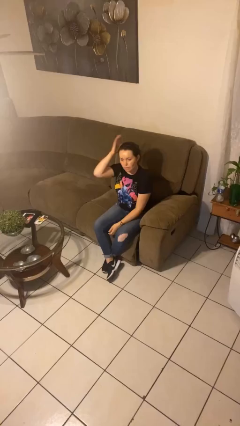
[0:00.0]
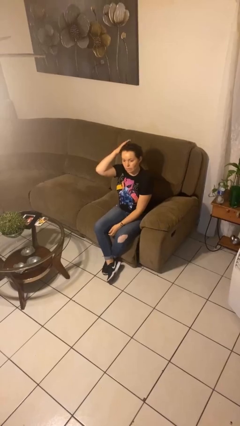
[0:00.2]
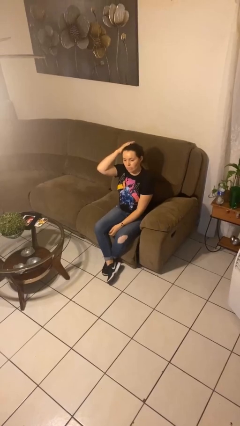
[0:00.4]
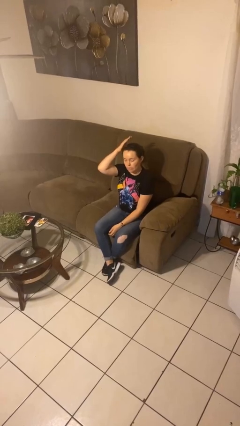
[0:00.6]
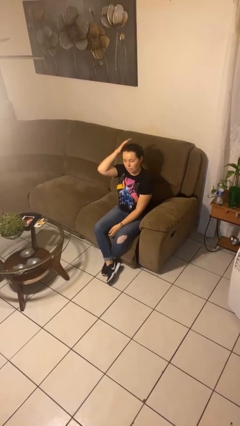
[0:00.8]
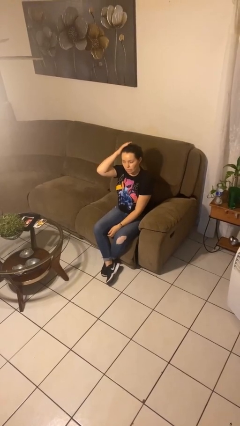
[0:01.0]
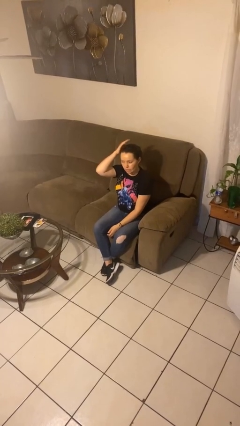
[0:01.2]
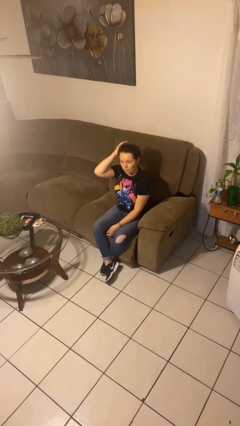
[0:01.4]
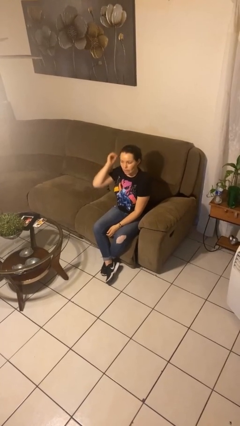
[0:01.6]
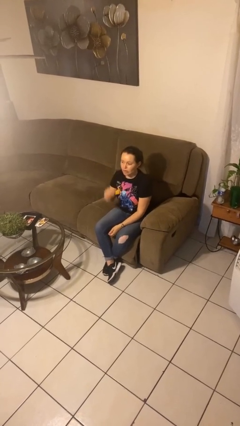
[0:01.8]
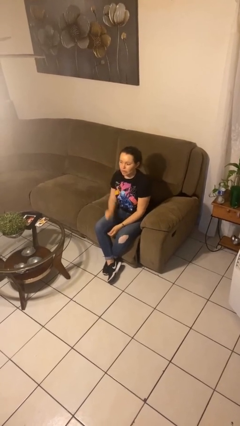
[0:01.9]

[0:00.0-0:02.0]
person pats head

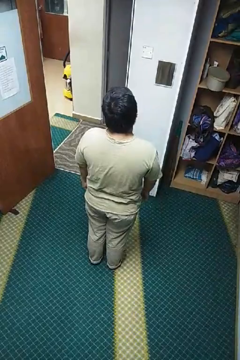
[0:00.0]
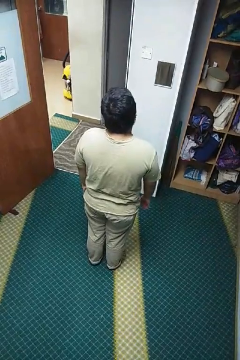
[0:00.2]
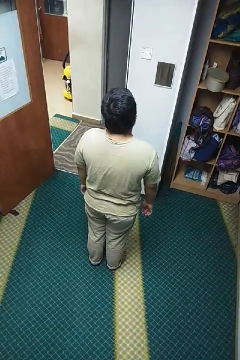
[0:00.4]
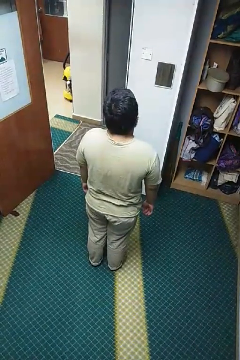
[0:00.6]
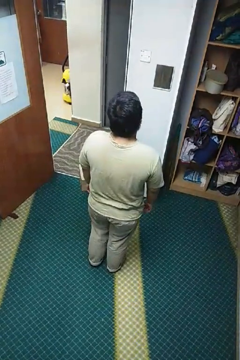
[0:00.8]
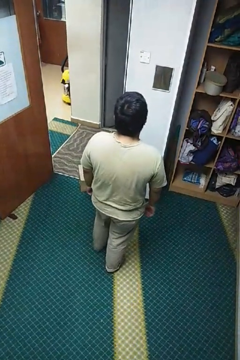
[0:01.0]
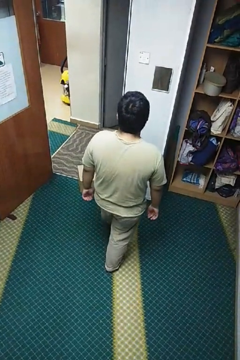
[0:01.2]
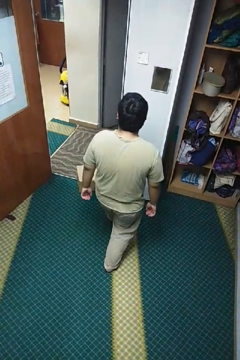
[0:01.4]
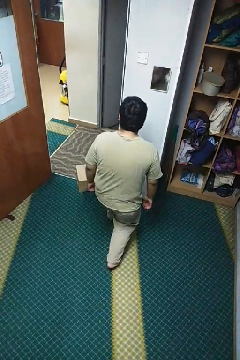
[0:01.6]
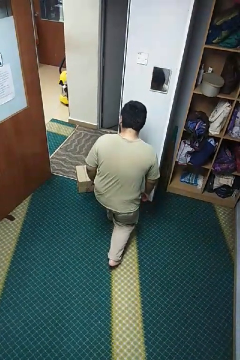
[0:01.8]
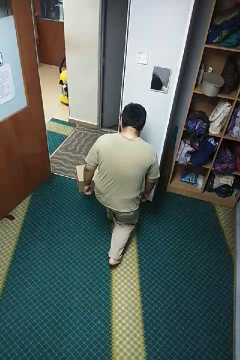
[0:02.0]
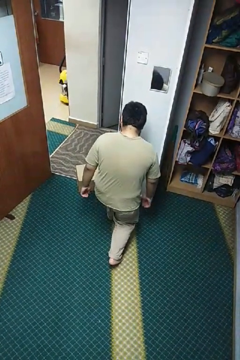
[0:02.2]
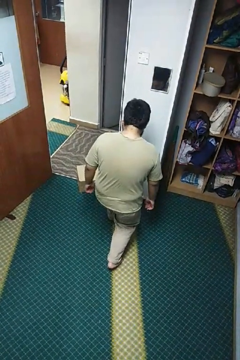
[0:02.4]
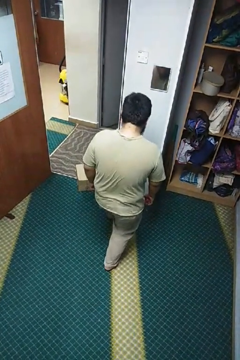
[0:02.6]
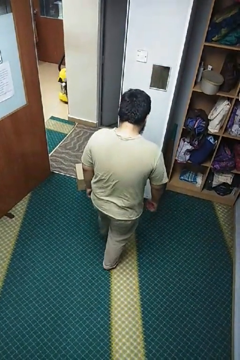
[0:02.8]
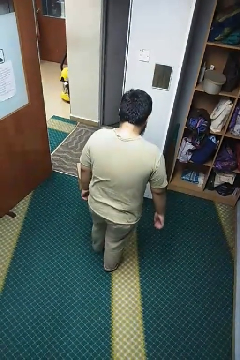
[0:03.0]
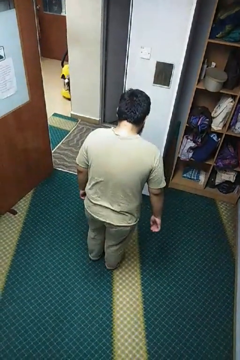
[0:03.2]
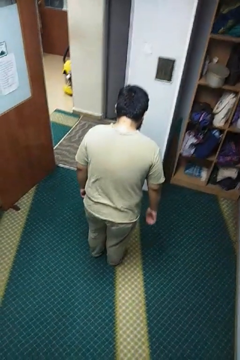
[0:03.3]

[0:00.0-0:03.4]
person exercises with lunges

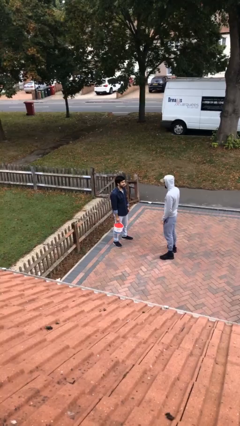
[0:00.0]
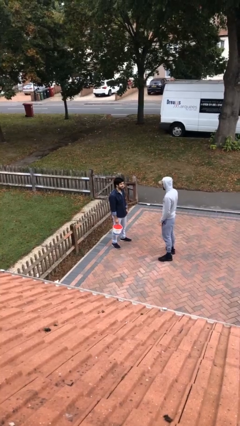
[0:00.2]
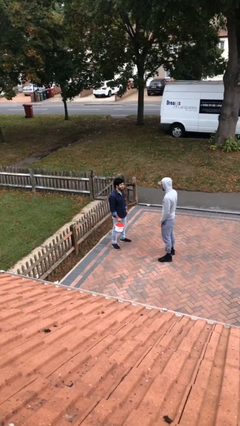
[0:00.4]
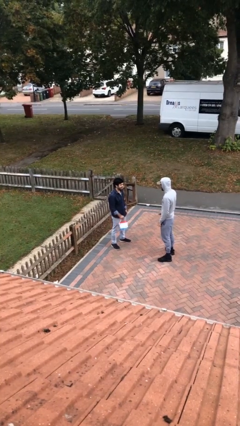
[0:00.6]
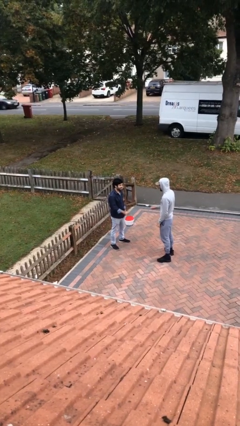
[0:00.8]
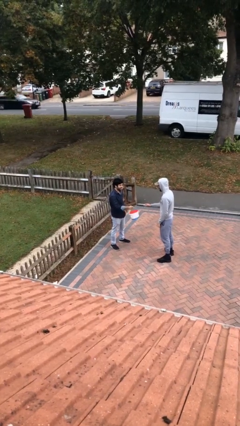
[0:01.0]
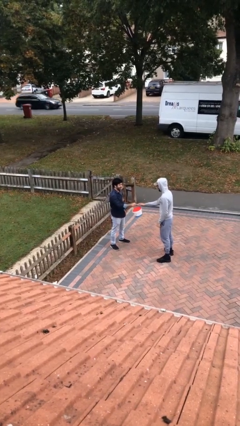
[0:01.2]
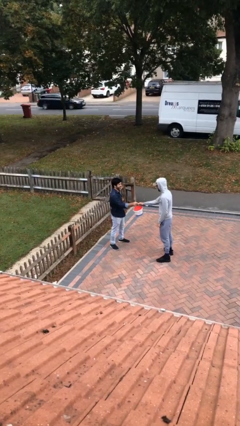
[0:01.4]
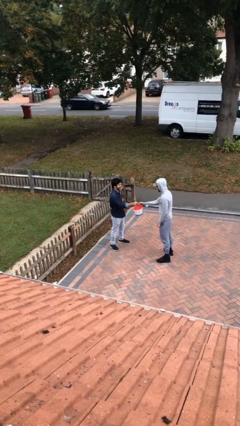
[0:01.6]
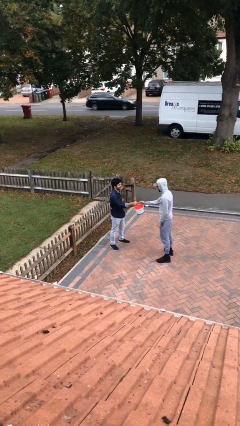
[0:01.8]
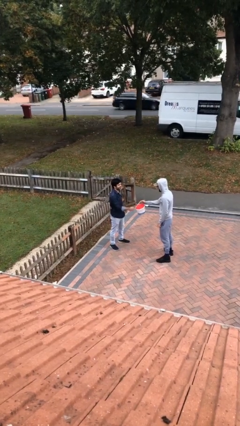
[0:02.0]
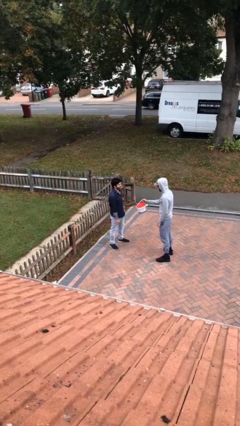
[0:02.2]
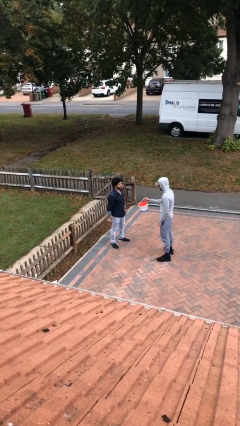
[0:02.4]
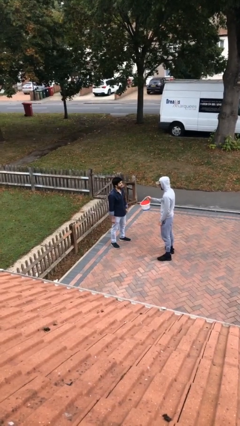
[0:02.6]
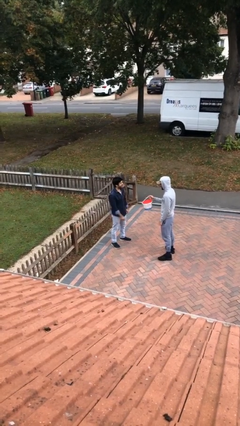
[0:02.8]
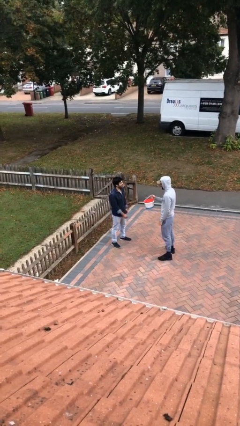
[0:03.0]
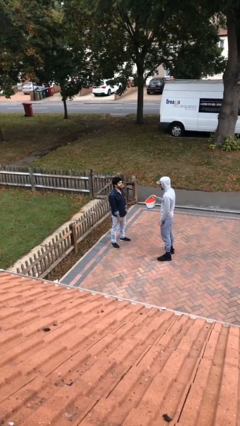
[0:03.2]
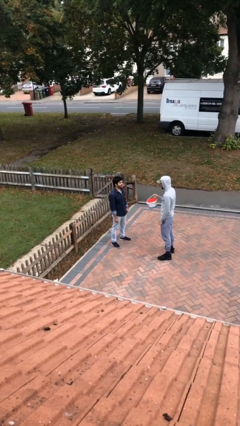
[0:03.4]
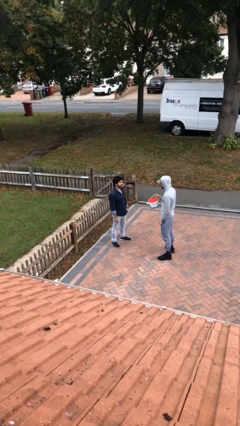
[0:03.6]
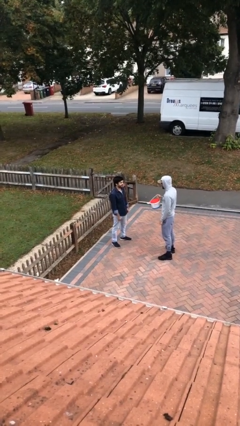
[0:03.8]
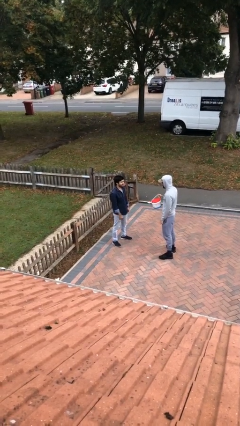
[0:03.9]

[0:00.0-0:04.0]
person transfers object to person

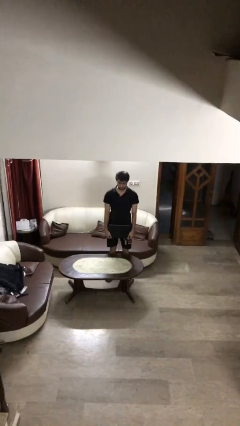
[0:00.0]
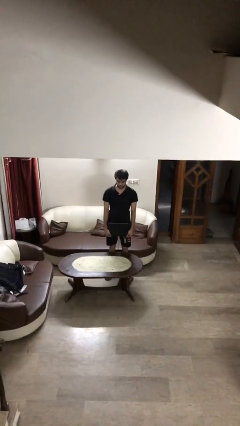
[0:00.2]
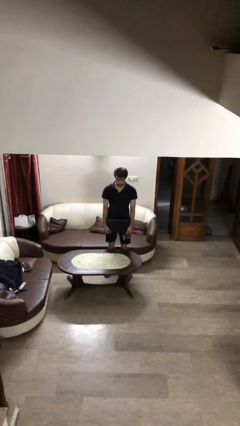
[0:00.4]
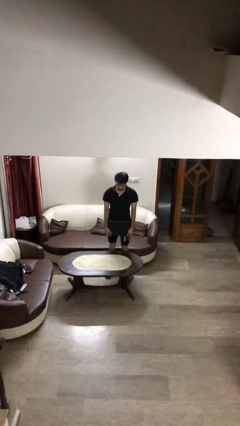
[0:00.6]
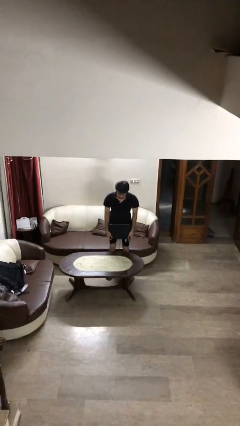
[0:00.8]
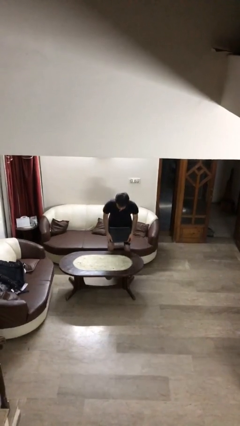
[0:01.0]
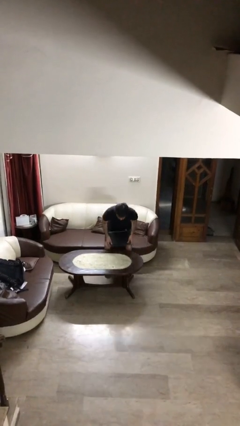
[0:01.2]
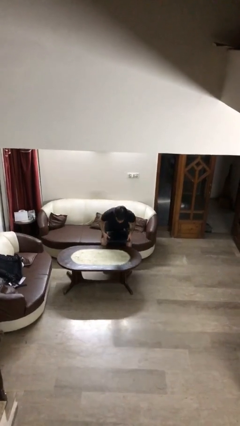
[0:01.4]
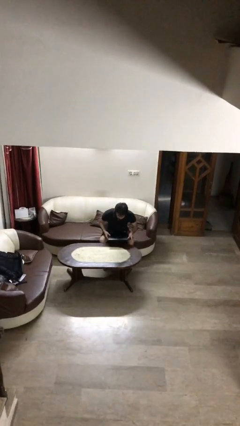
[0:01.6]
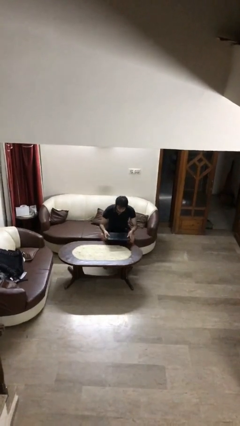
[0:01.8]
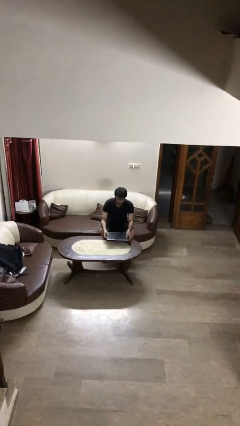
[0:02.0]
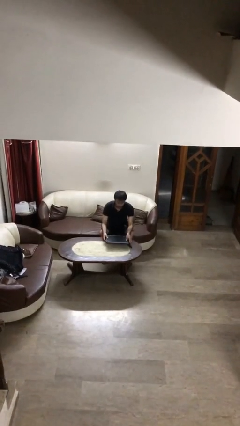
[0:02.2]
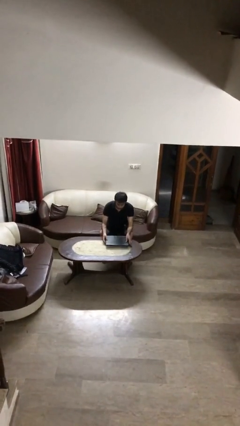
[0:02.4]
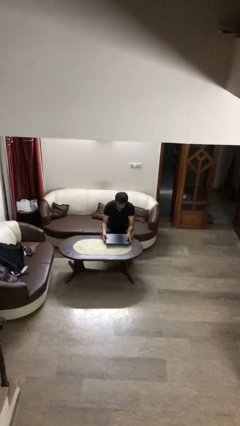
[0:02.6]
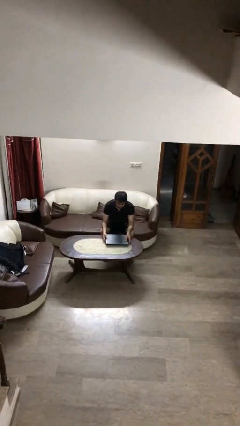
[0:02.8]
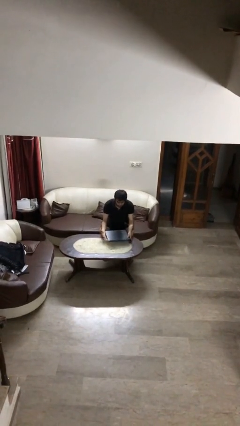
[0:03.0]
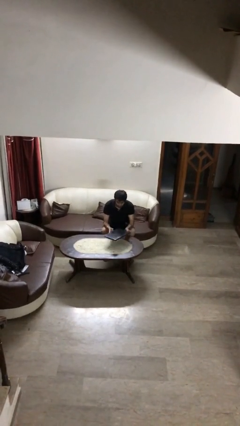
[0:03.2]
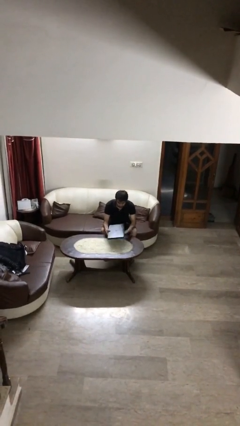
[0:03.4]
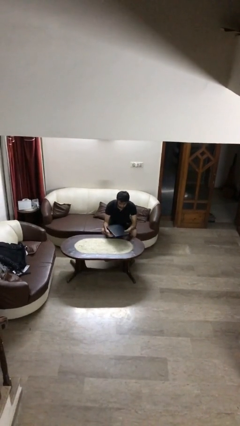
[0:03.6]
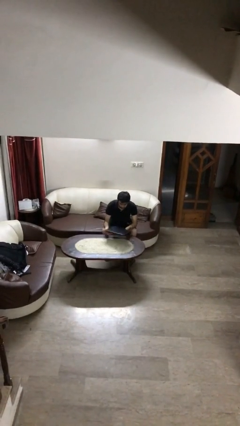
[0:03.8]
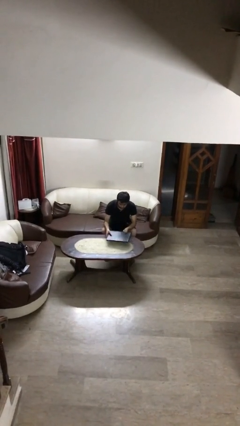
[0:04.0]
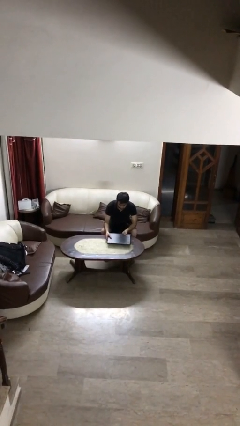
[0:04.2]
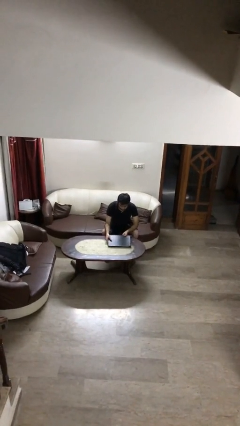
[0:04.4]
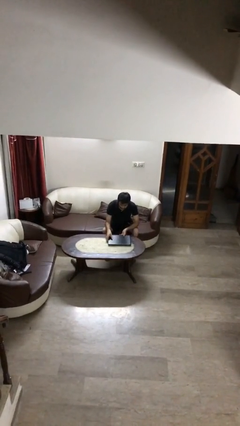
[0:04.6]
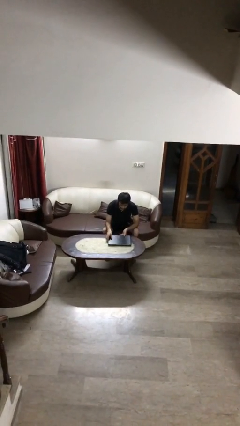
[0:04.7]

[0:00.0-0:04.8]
person sits down

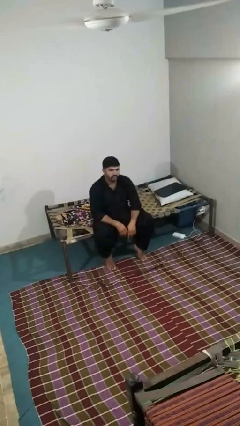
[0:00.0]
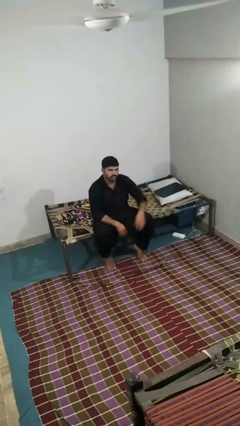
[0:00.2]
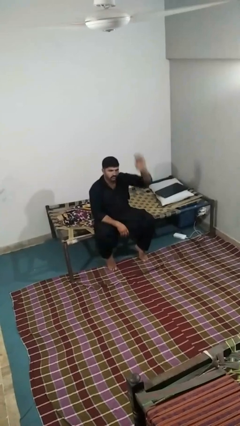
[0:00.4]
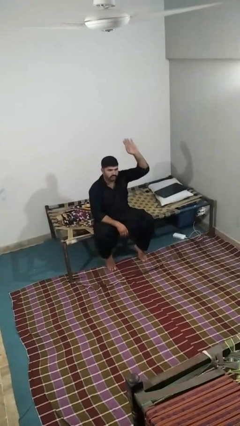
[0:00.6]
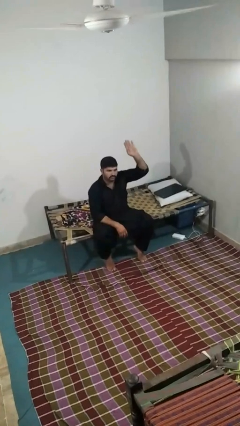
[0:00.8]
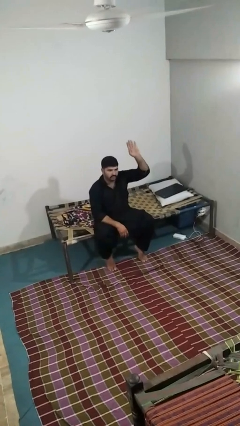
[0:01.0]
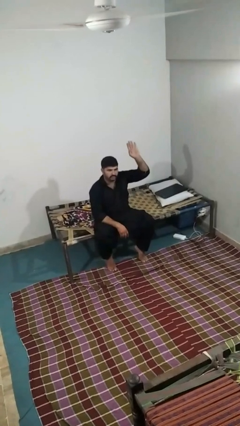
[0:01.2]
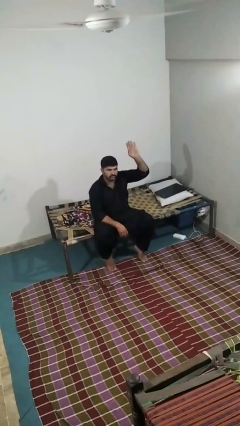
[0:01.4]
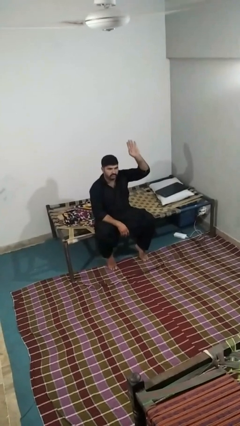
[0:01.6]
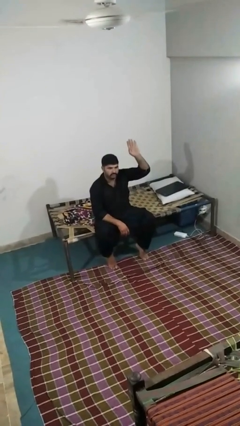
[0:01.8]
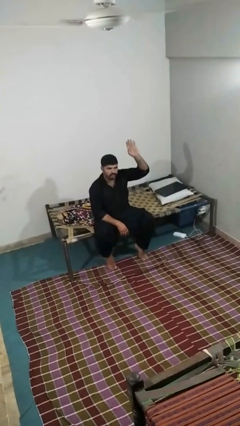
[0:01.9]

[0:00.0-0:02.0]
person gestures raise hand

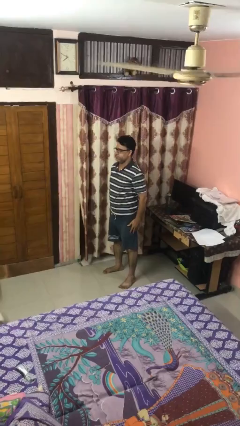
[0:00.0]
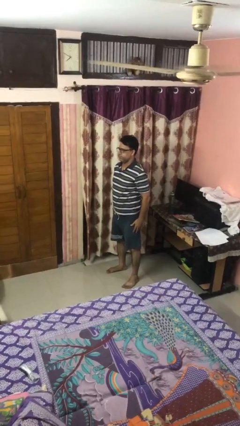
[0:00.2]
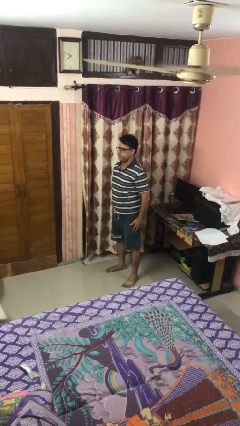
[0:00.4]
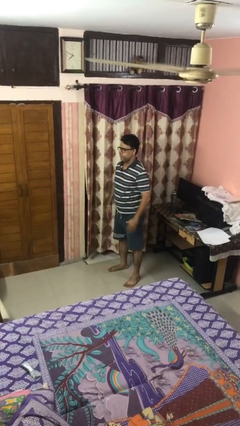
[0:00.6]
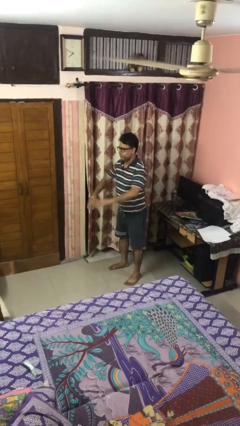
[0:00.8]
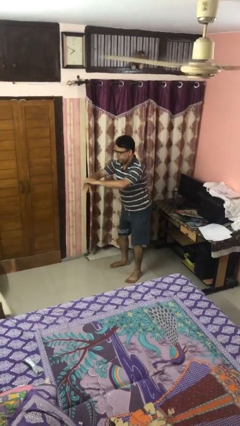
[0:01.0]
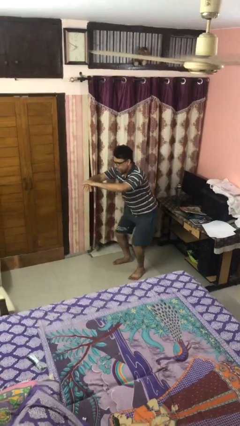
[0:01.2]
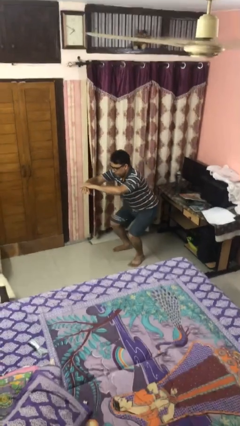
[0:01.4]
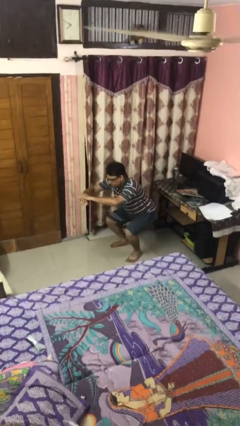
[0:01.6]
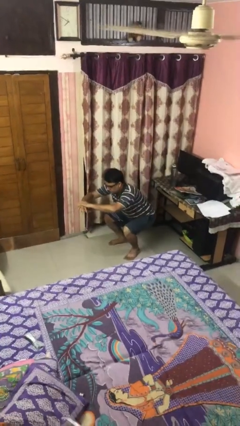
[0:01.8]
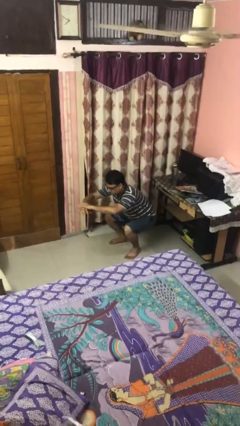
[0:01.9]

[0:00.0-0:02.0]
person squats
